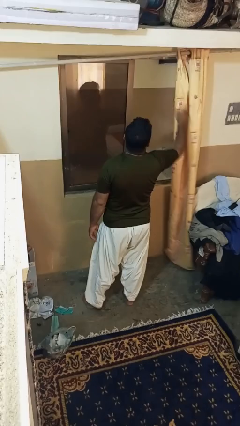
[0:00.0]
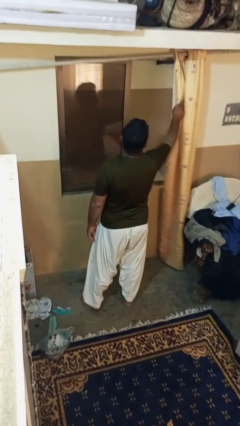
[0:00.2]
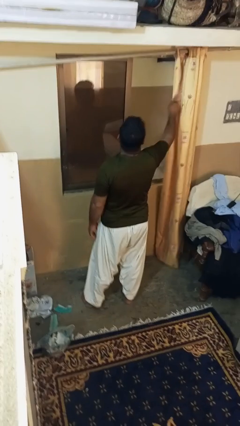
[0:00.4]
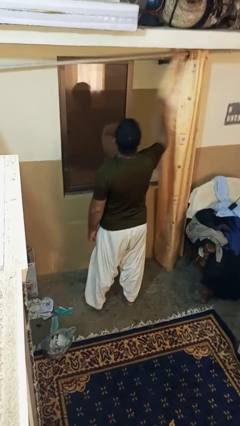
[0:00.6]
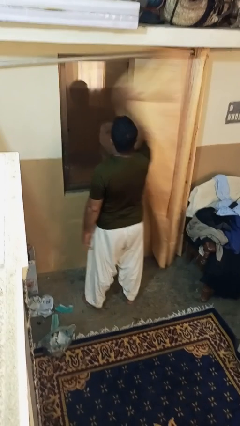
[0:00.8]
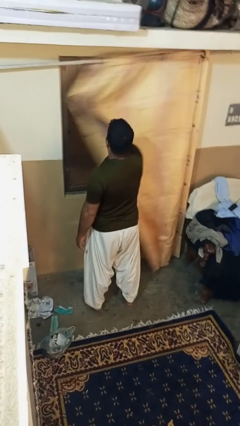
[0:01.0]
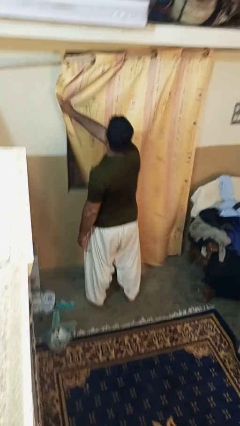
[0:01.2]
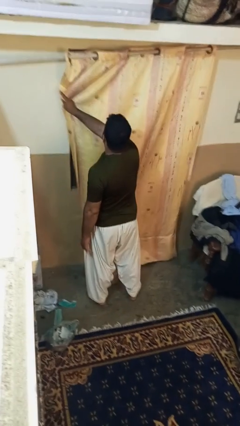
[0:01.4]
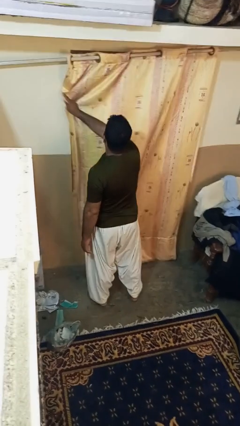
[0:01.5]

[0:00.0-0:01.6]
person closes curtains

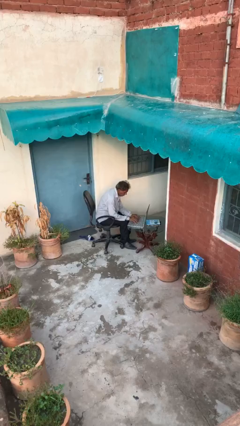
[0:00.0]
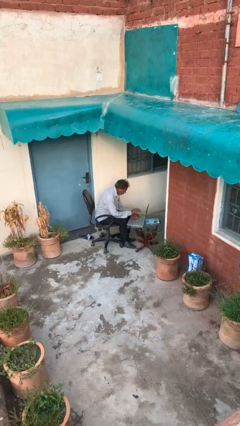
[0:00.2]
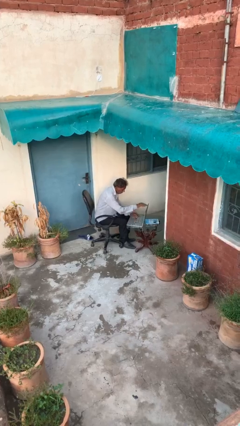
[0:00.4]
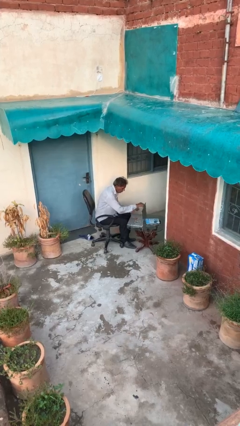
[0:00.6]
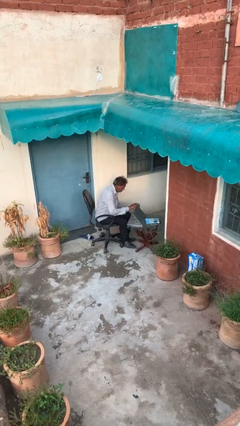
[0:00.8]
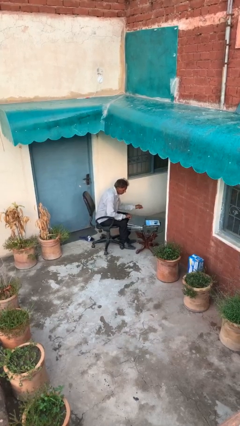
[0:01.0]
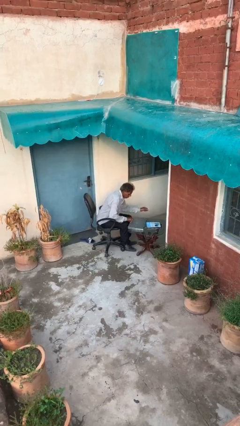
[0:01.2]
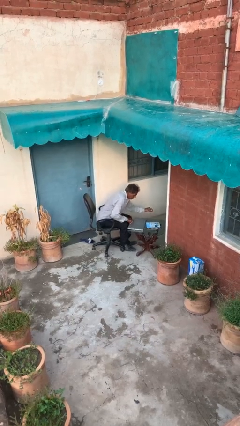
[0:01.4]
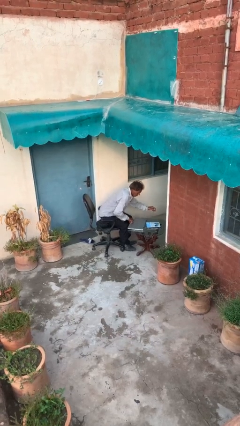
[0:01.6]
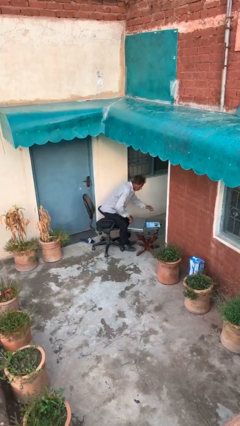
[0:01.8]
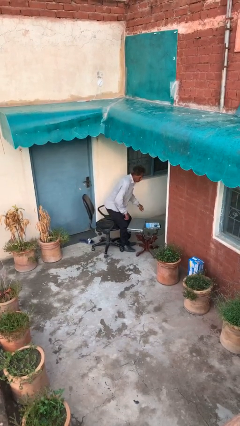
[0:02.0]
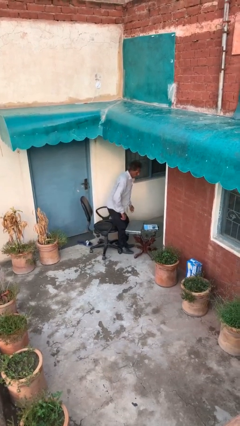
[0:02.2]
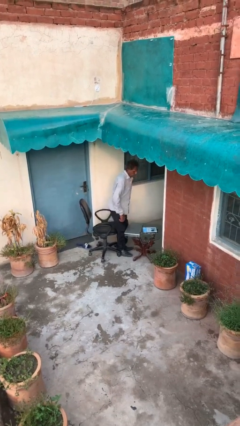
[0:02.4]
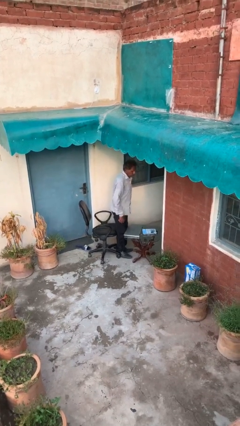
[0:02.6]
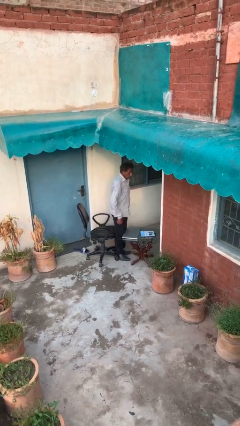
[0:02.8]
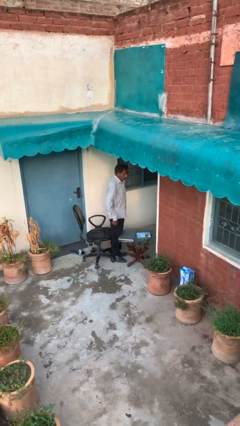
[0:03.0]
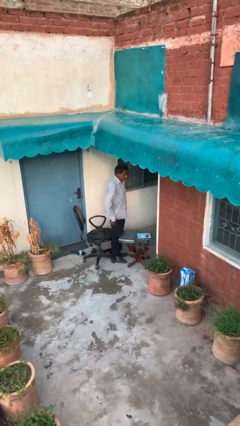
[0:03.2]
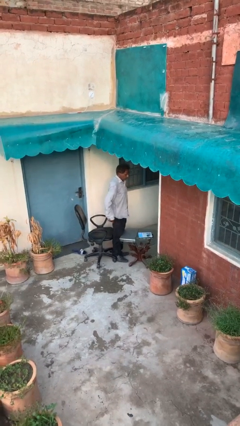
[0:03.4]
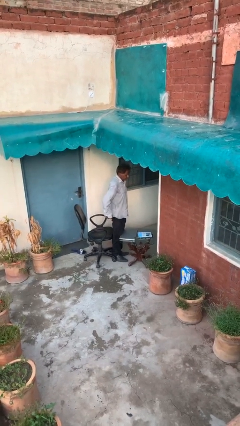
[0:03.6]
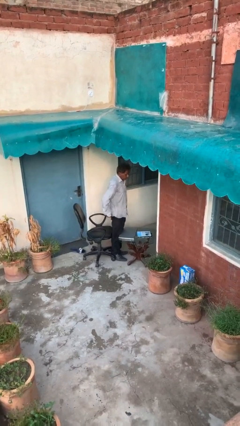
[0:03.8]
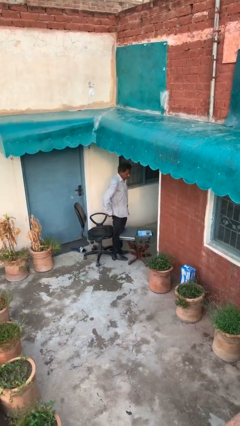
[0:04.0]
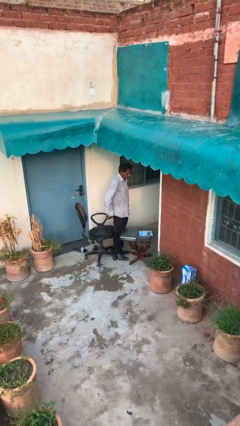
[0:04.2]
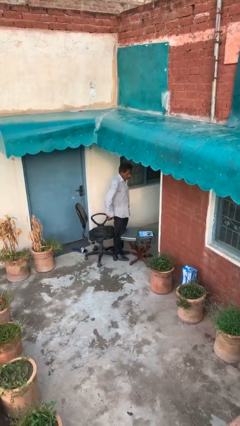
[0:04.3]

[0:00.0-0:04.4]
person stands up

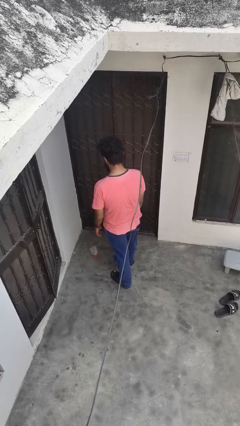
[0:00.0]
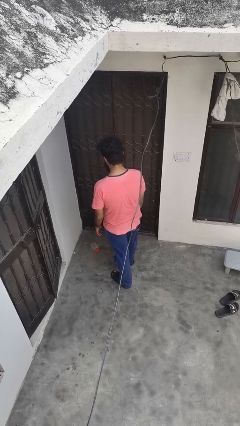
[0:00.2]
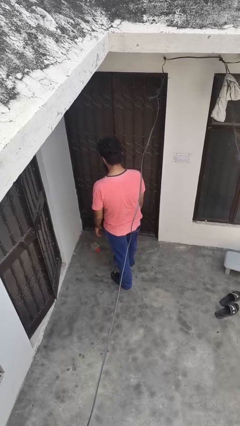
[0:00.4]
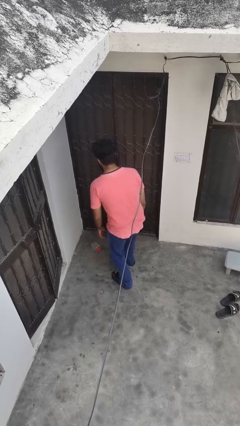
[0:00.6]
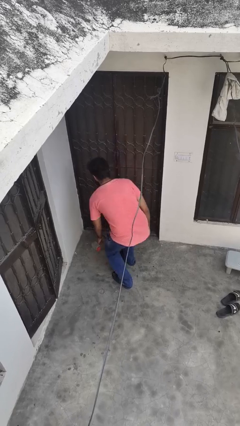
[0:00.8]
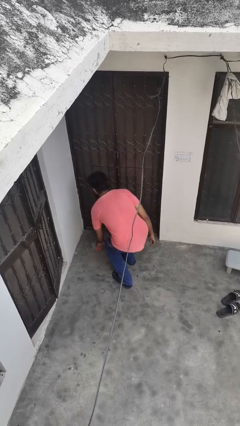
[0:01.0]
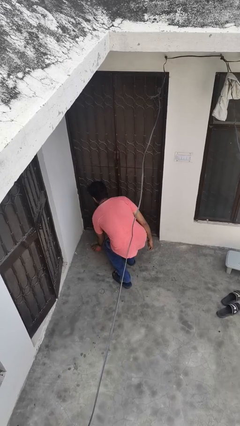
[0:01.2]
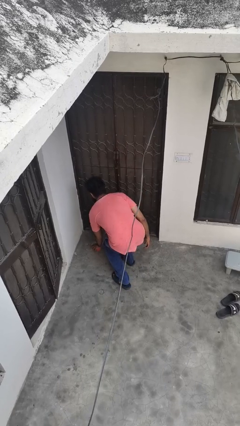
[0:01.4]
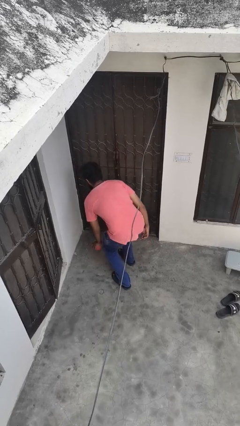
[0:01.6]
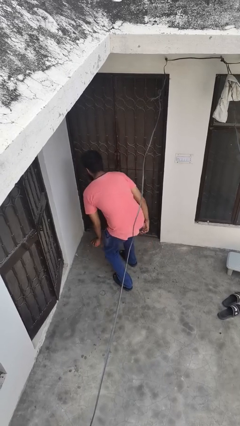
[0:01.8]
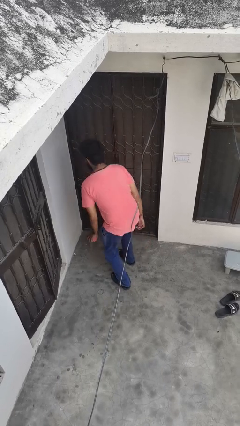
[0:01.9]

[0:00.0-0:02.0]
person picks up object from floor

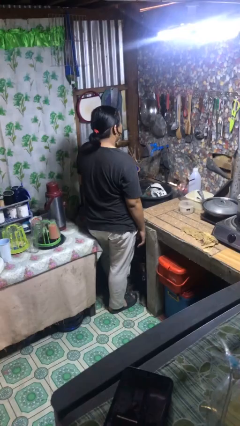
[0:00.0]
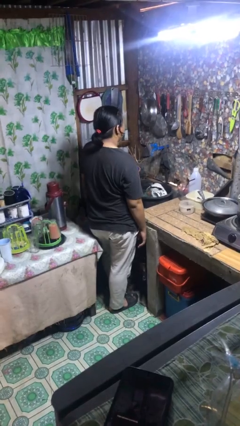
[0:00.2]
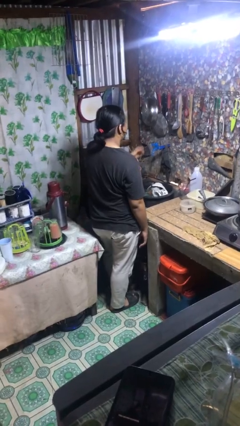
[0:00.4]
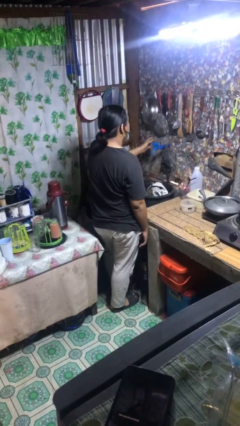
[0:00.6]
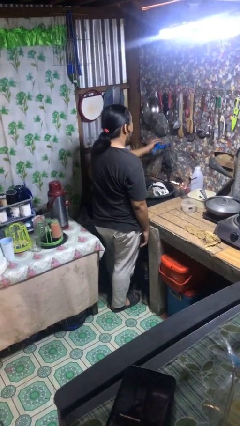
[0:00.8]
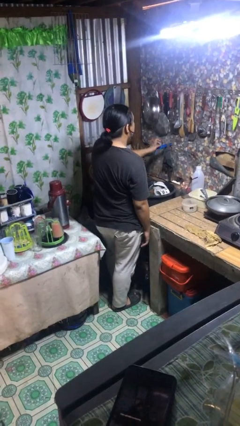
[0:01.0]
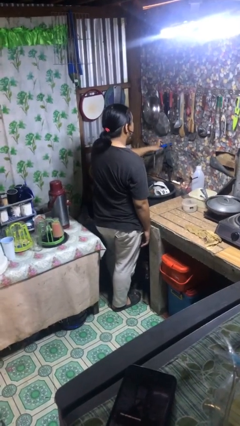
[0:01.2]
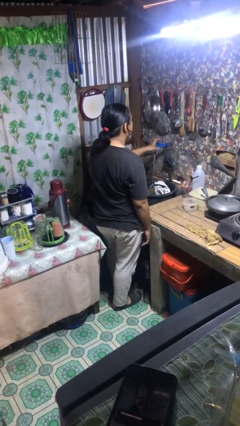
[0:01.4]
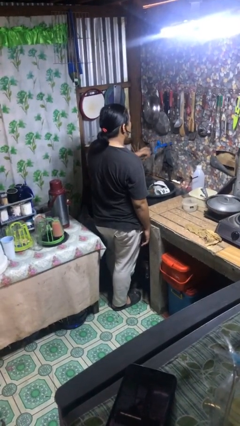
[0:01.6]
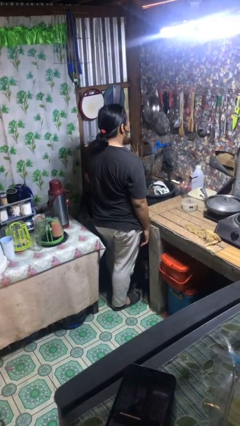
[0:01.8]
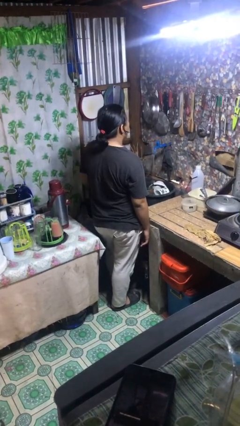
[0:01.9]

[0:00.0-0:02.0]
person turns on faucet

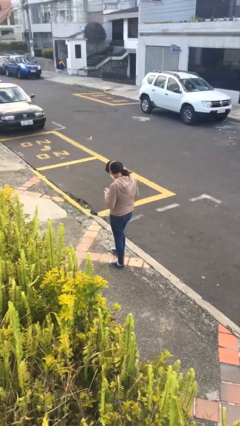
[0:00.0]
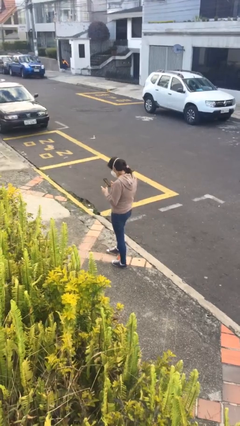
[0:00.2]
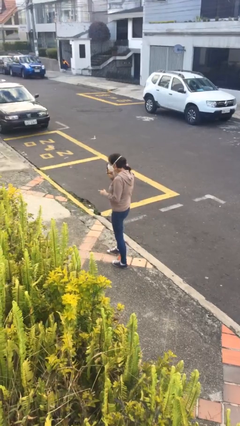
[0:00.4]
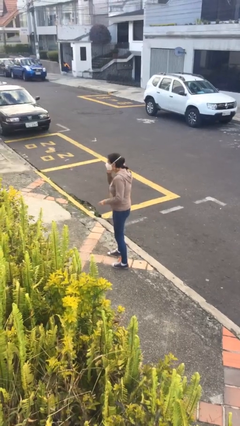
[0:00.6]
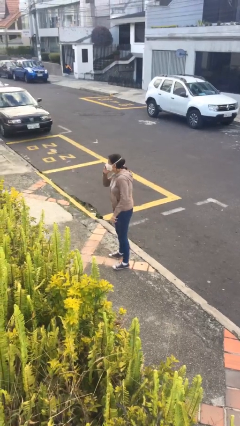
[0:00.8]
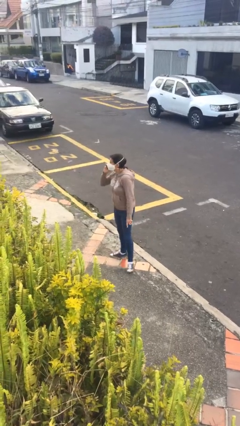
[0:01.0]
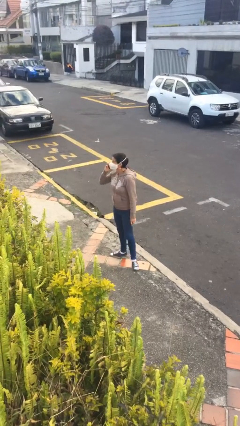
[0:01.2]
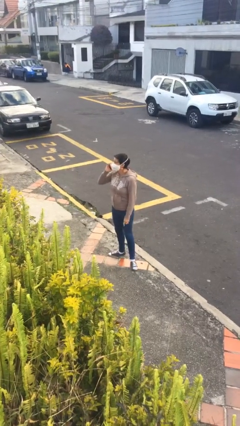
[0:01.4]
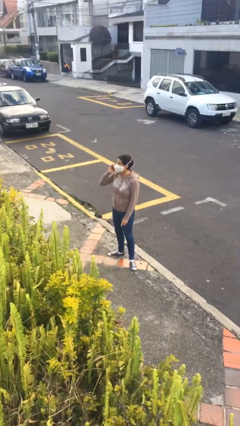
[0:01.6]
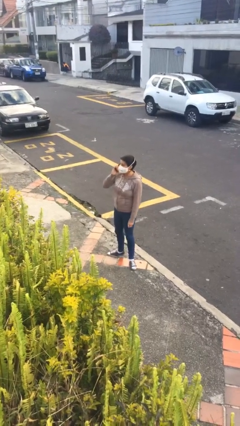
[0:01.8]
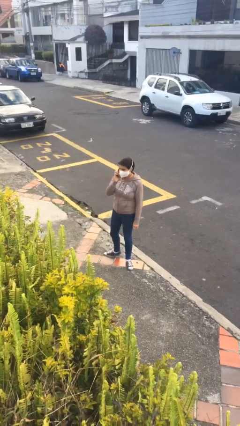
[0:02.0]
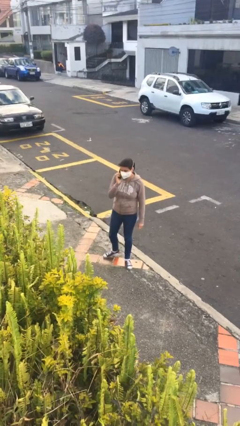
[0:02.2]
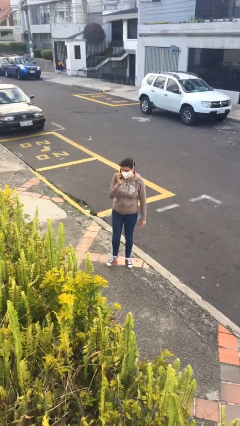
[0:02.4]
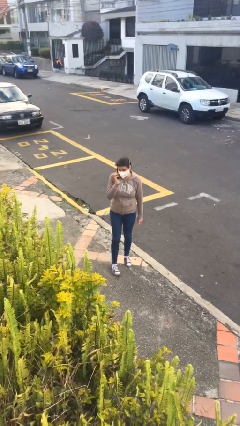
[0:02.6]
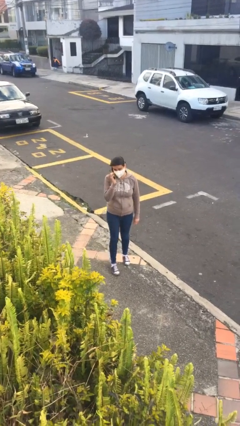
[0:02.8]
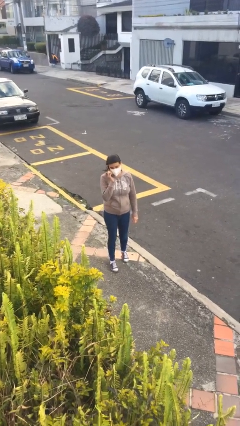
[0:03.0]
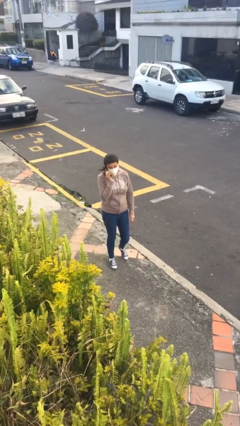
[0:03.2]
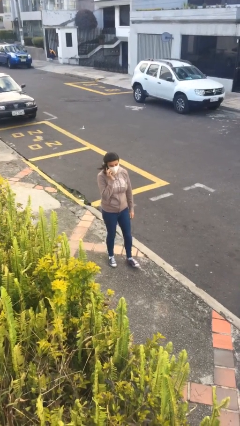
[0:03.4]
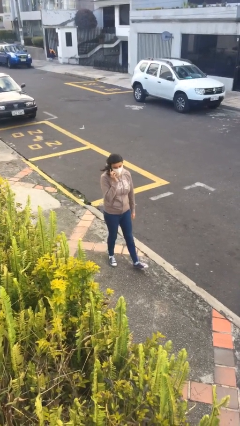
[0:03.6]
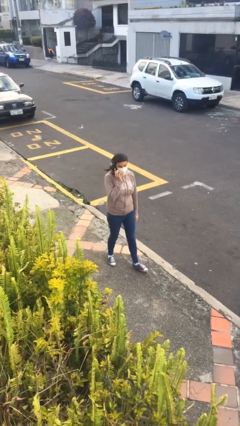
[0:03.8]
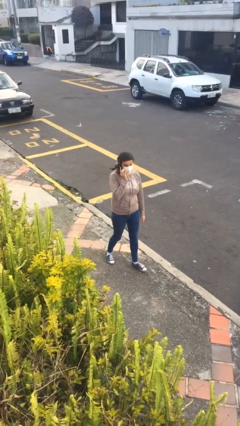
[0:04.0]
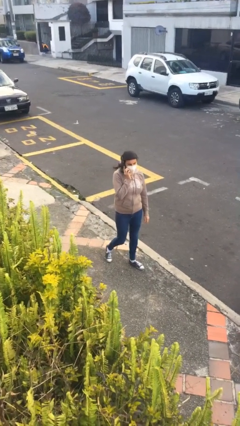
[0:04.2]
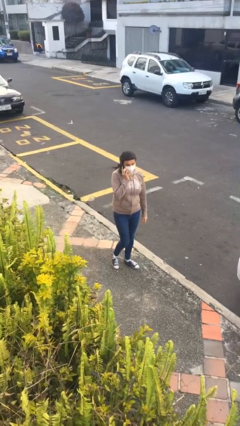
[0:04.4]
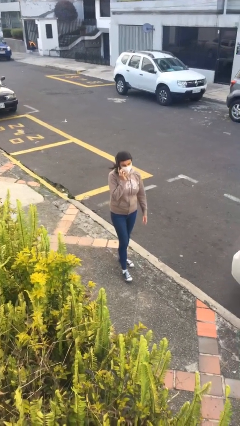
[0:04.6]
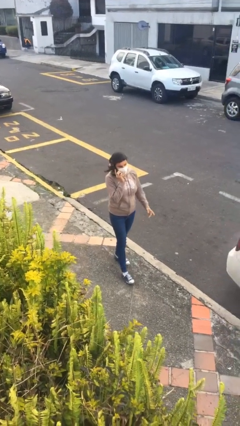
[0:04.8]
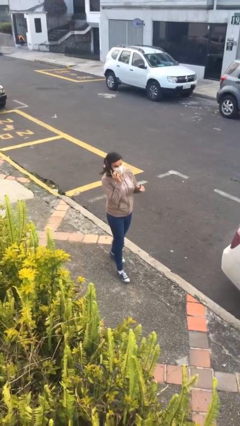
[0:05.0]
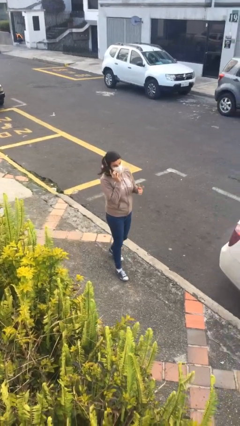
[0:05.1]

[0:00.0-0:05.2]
person talks on phone

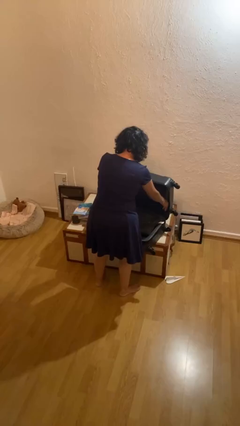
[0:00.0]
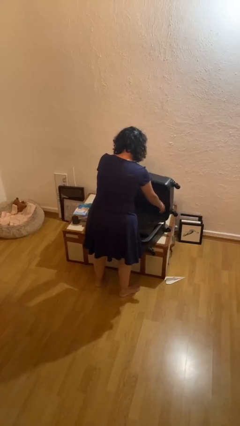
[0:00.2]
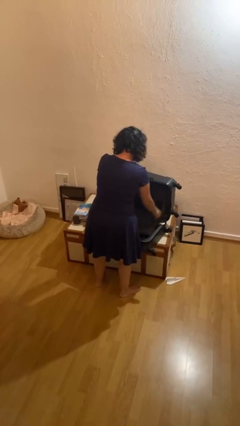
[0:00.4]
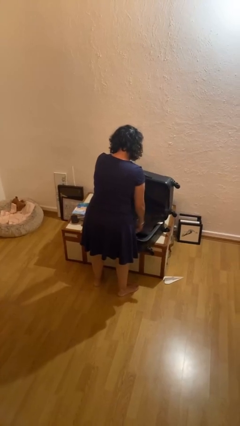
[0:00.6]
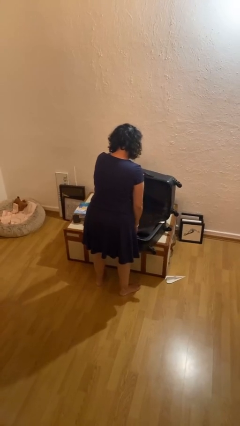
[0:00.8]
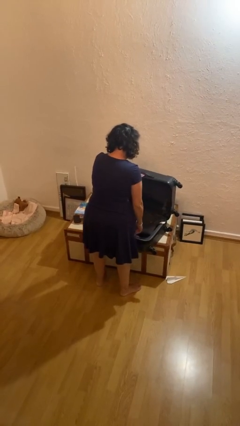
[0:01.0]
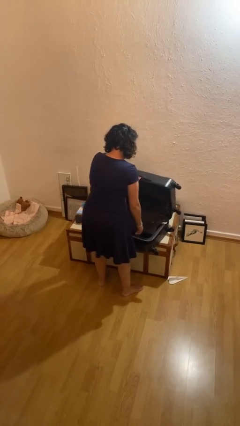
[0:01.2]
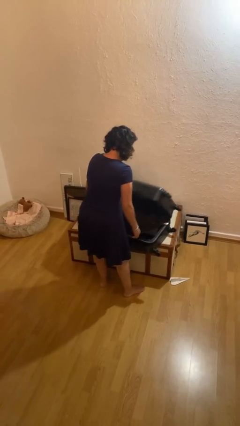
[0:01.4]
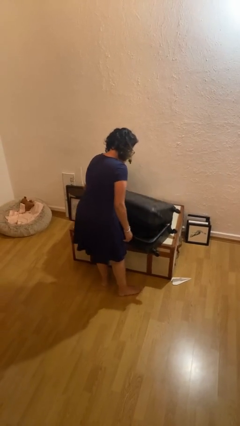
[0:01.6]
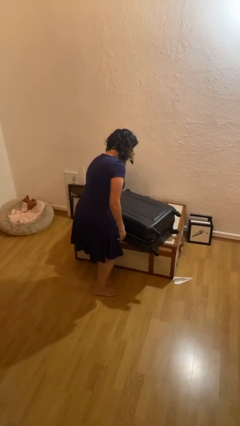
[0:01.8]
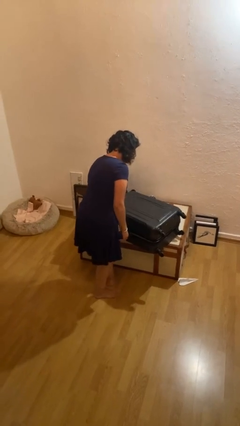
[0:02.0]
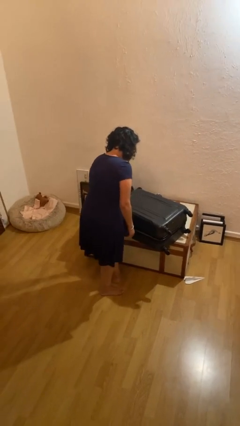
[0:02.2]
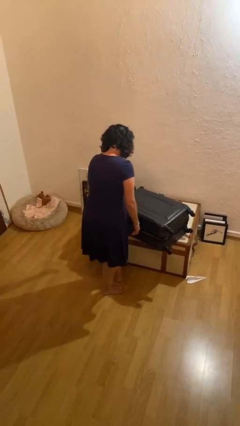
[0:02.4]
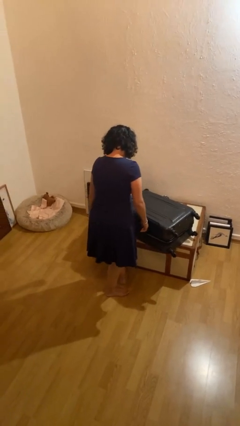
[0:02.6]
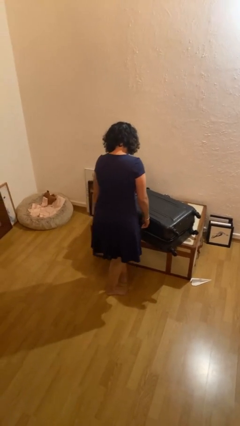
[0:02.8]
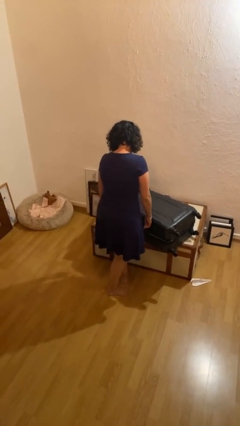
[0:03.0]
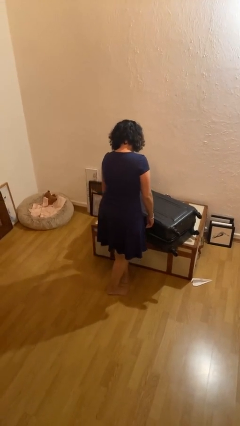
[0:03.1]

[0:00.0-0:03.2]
person closes suitcase
